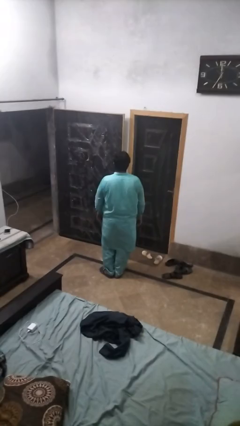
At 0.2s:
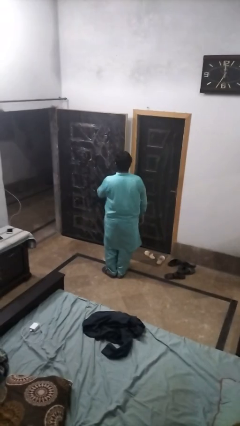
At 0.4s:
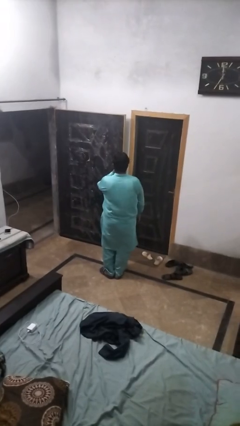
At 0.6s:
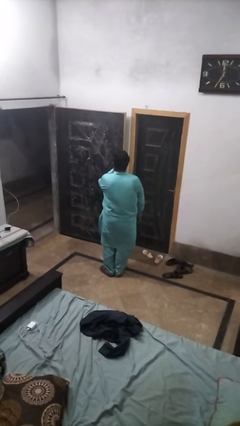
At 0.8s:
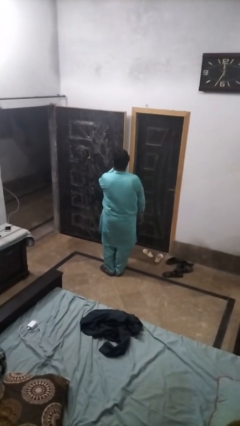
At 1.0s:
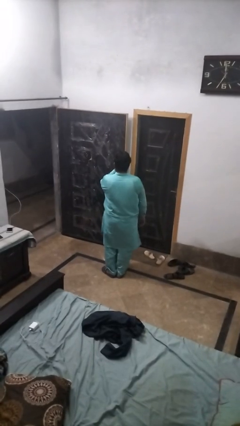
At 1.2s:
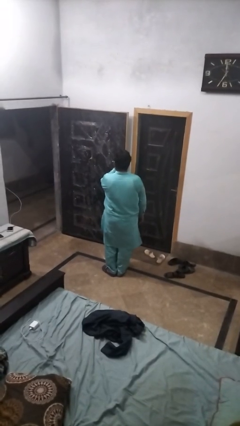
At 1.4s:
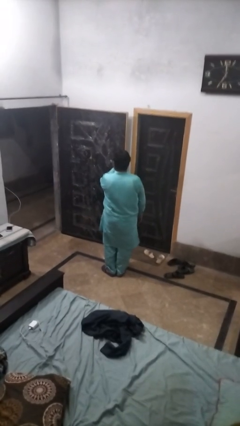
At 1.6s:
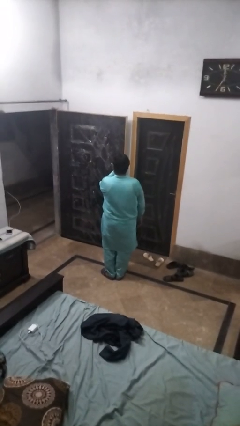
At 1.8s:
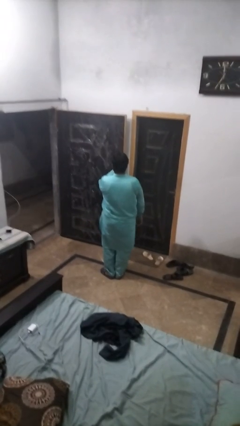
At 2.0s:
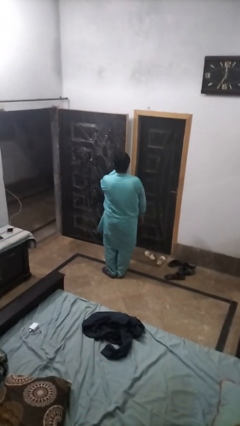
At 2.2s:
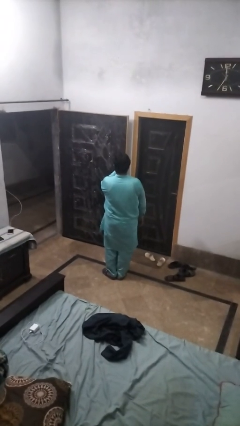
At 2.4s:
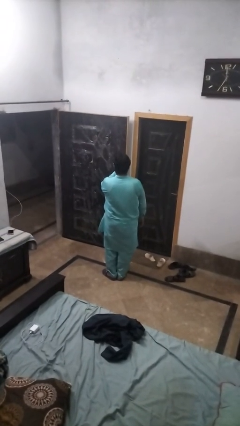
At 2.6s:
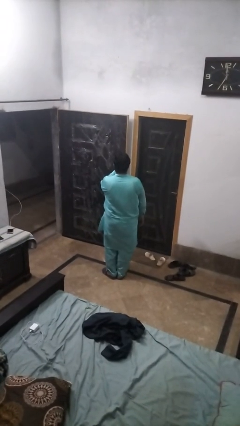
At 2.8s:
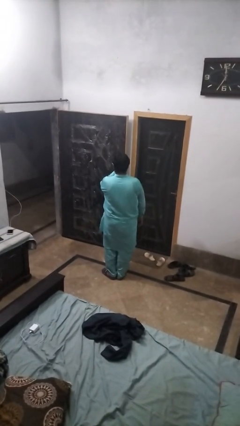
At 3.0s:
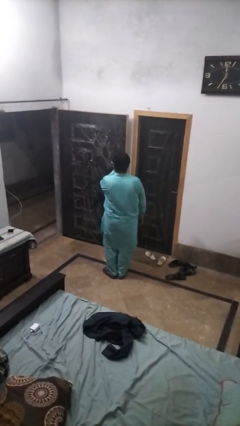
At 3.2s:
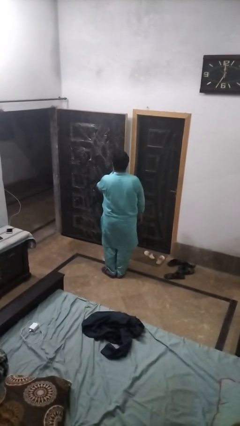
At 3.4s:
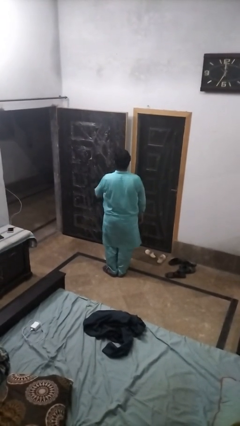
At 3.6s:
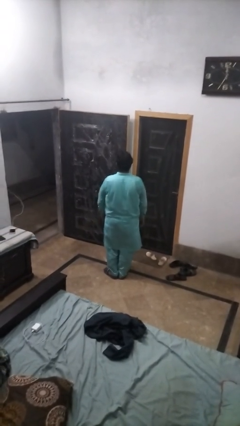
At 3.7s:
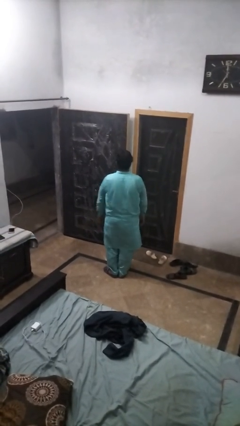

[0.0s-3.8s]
person licks fingers

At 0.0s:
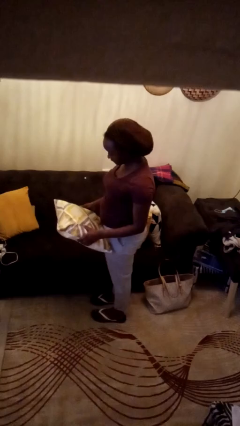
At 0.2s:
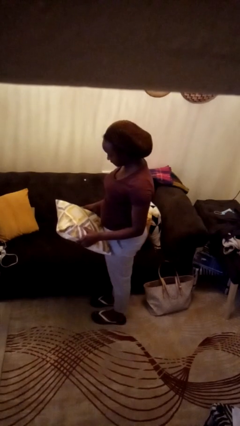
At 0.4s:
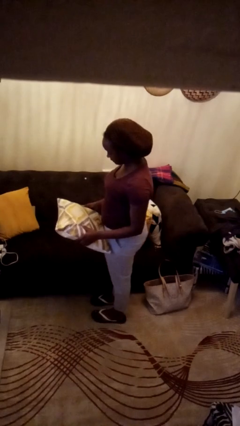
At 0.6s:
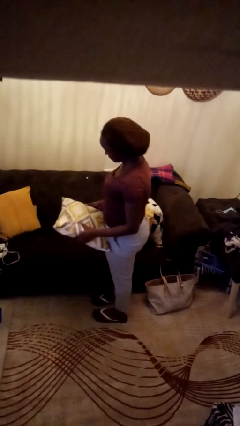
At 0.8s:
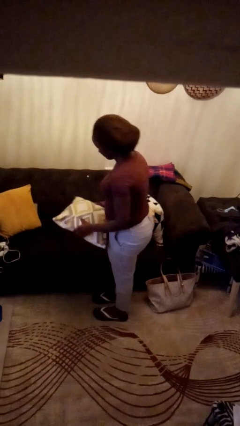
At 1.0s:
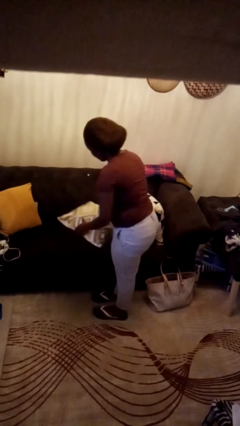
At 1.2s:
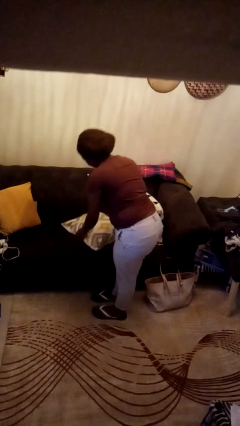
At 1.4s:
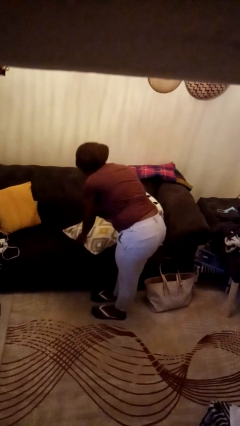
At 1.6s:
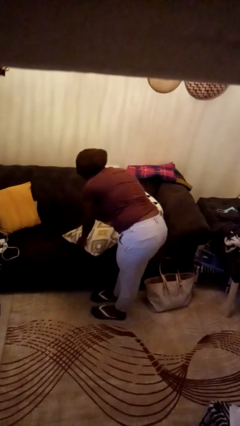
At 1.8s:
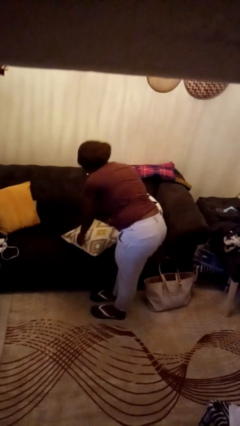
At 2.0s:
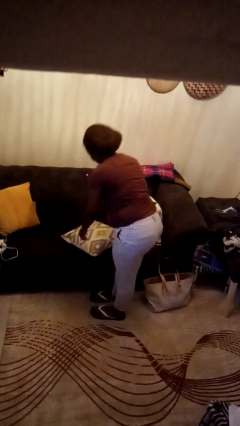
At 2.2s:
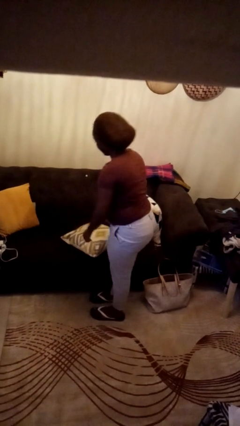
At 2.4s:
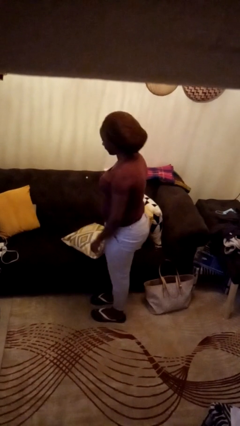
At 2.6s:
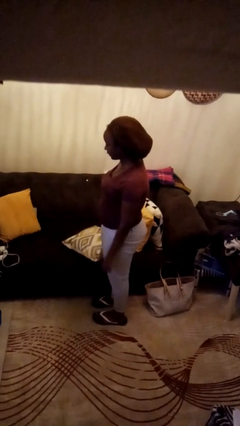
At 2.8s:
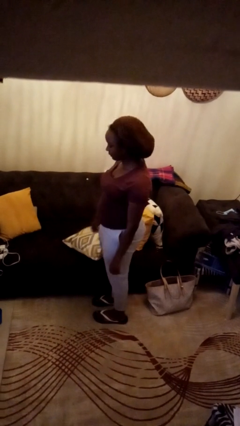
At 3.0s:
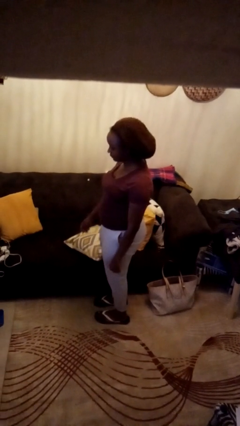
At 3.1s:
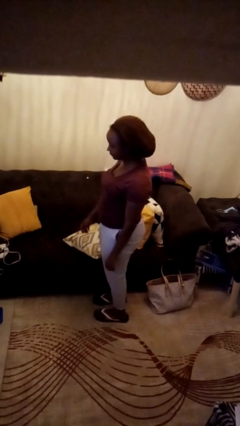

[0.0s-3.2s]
person puts down object on couch

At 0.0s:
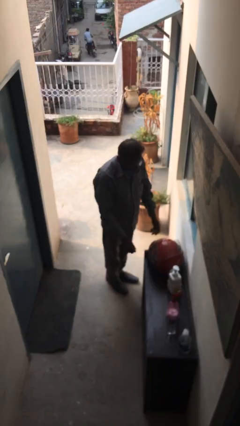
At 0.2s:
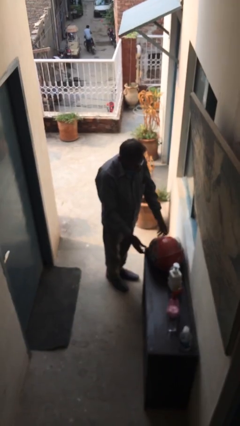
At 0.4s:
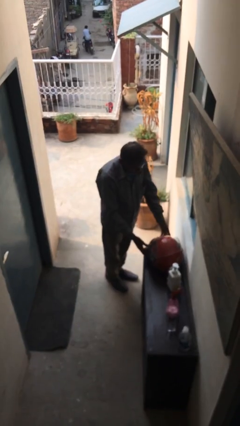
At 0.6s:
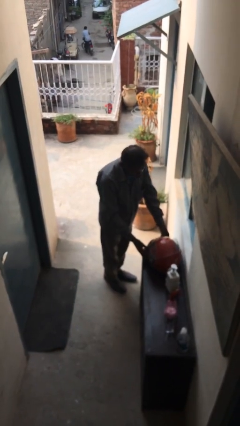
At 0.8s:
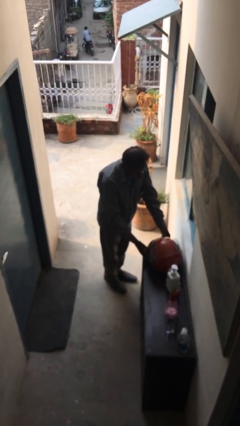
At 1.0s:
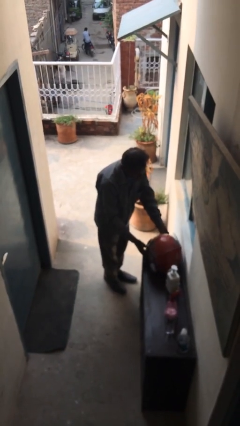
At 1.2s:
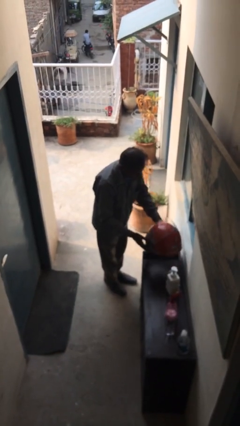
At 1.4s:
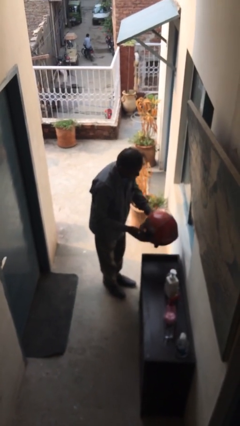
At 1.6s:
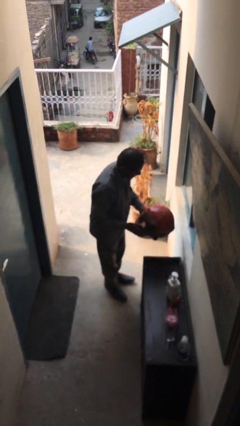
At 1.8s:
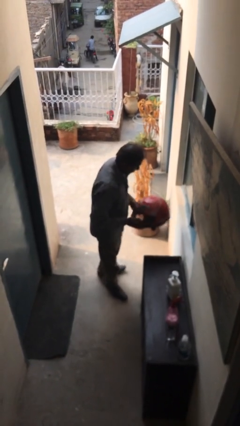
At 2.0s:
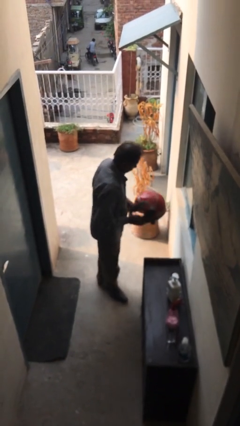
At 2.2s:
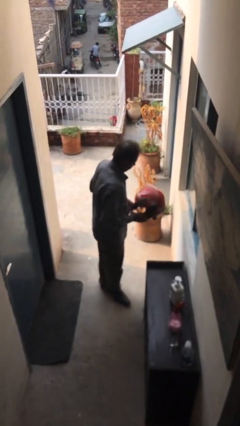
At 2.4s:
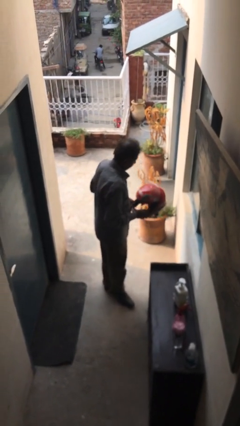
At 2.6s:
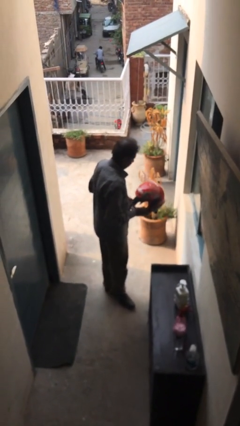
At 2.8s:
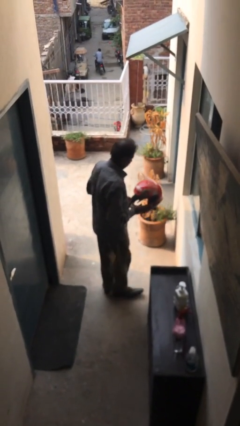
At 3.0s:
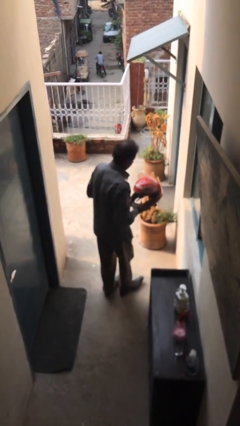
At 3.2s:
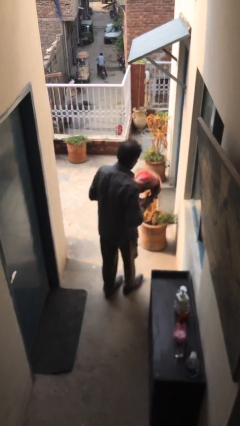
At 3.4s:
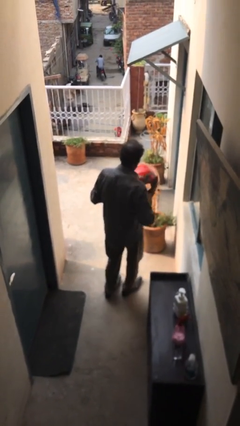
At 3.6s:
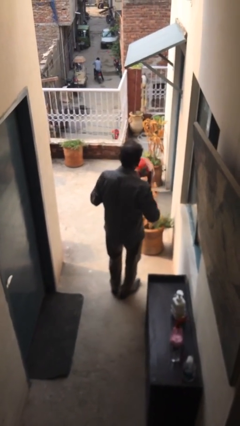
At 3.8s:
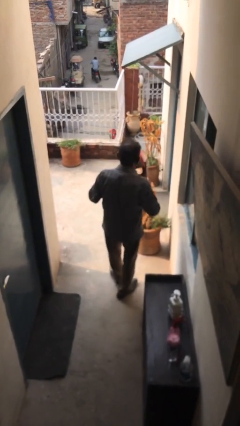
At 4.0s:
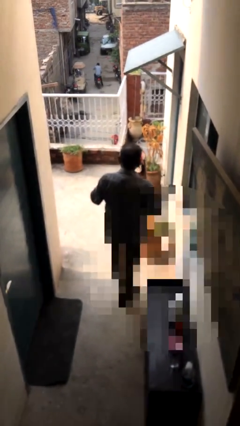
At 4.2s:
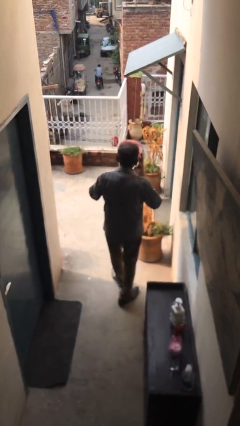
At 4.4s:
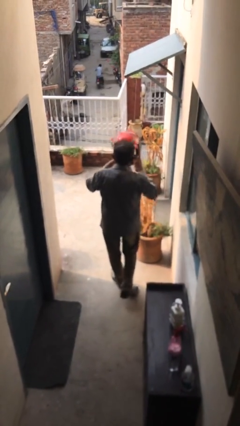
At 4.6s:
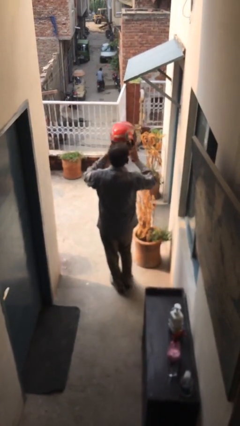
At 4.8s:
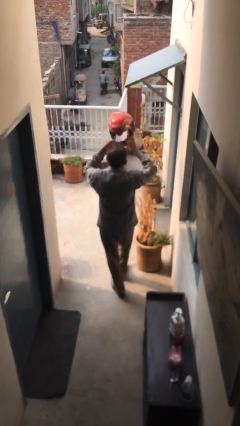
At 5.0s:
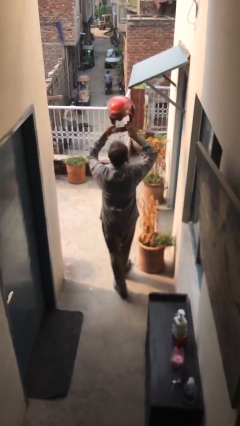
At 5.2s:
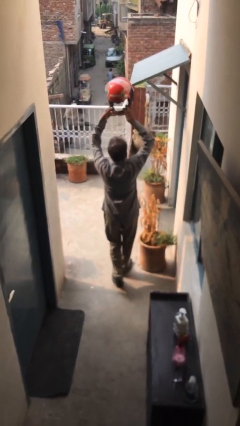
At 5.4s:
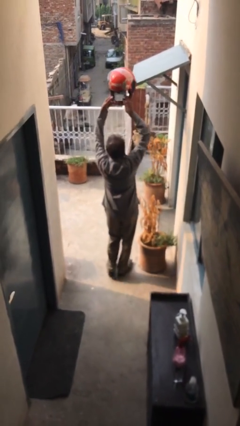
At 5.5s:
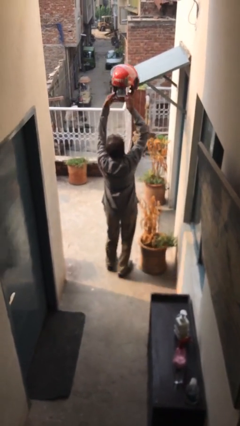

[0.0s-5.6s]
person picks up object from table

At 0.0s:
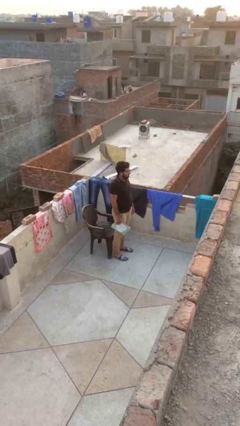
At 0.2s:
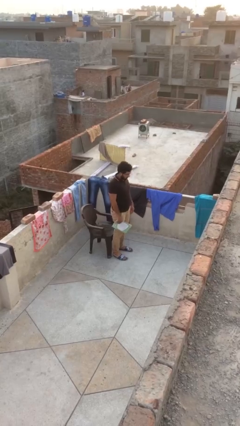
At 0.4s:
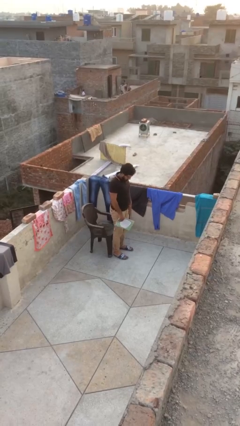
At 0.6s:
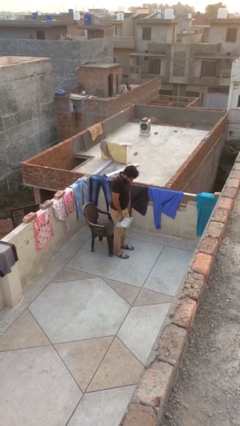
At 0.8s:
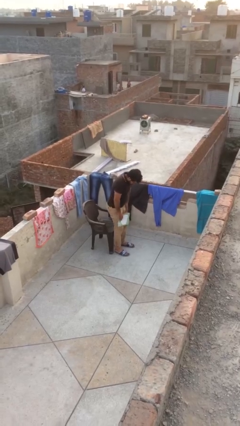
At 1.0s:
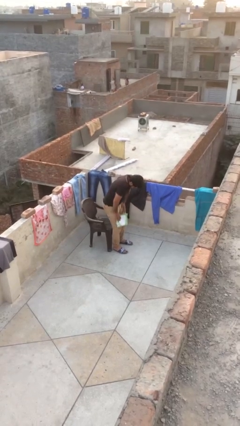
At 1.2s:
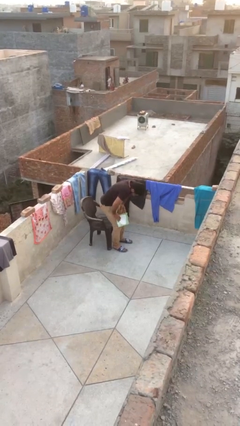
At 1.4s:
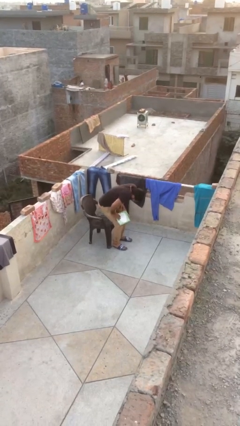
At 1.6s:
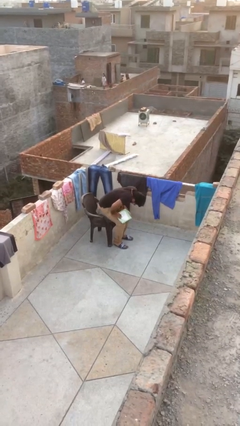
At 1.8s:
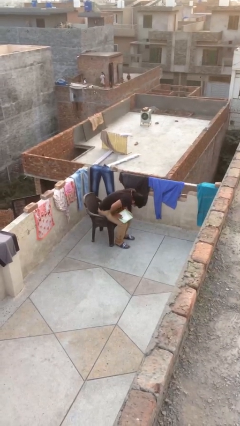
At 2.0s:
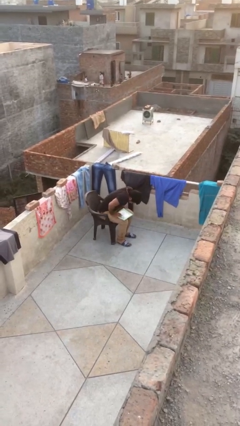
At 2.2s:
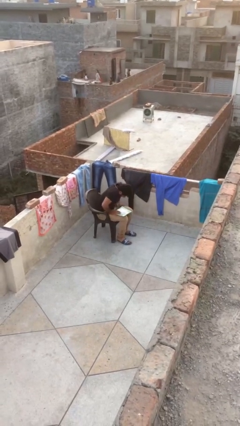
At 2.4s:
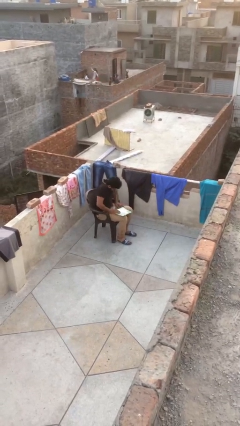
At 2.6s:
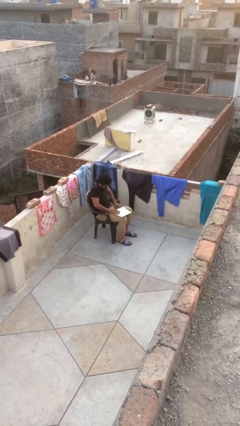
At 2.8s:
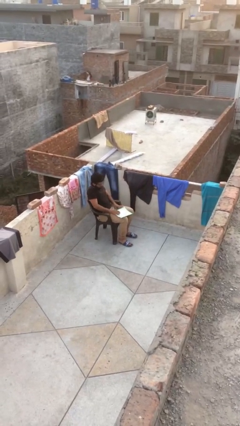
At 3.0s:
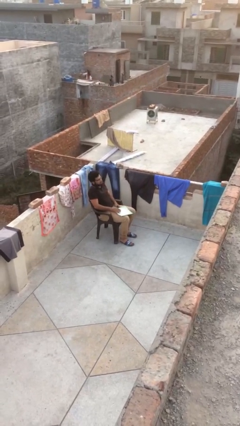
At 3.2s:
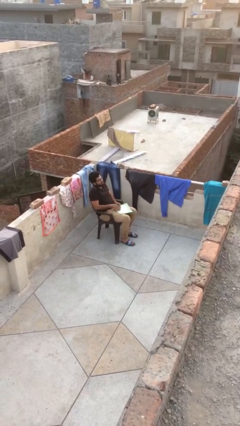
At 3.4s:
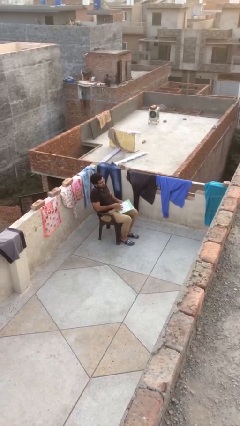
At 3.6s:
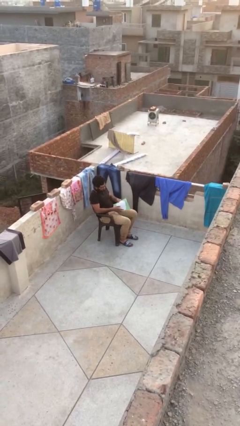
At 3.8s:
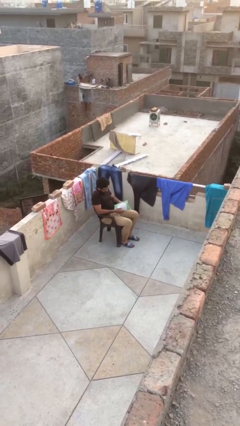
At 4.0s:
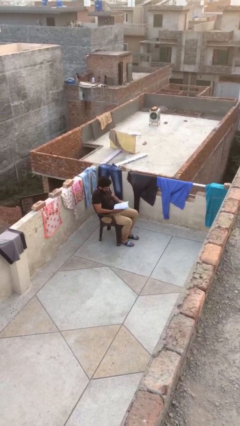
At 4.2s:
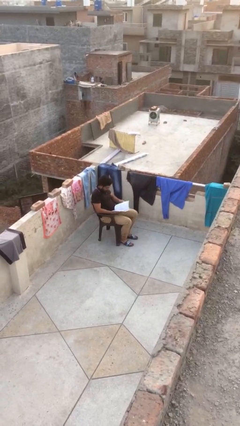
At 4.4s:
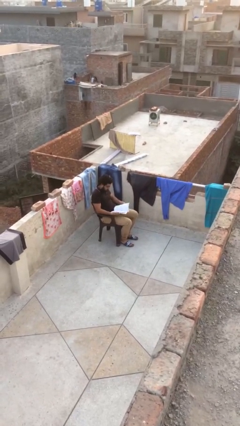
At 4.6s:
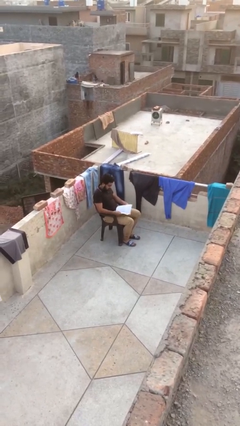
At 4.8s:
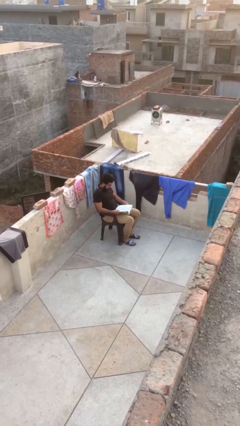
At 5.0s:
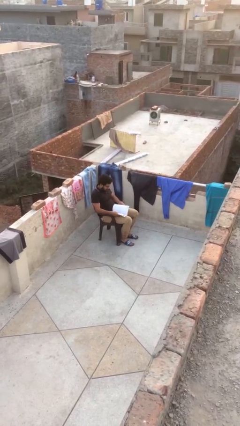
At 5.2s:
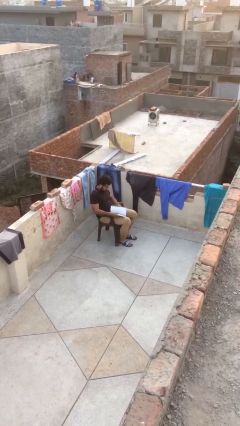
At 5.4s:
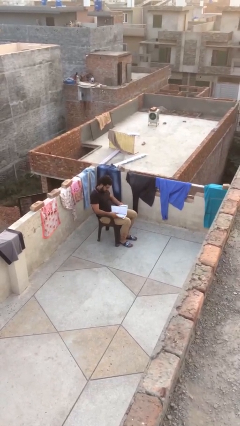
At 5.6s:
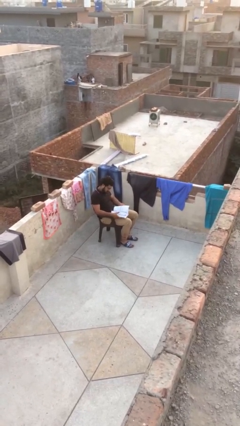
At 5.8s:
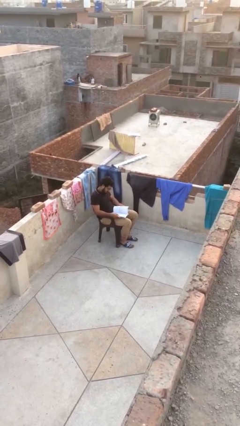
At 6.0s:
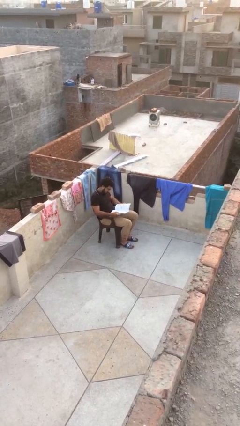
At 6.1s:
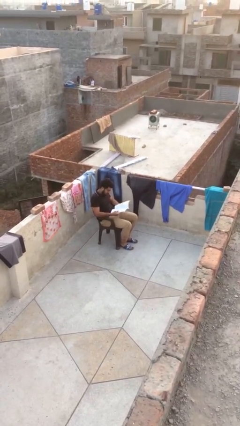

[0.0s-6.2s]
person sits down
